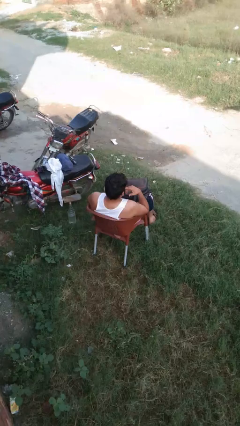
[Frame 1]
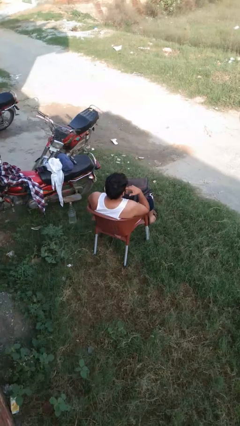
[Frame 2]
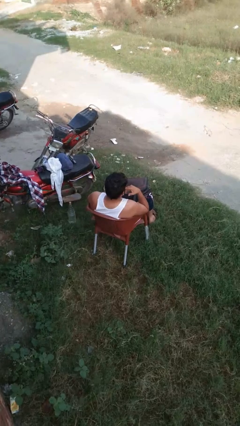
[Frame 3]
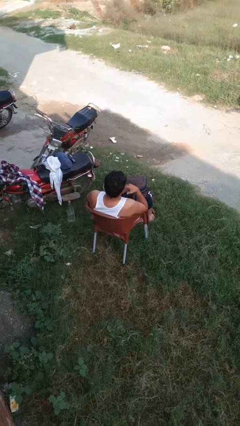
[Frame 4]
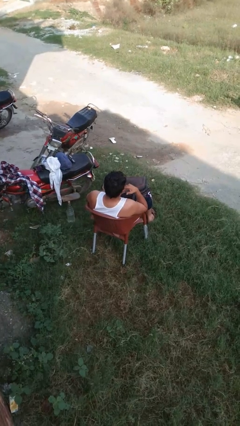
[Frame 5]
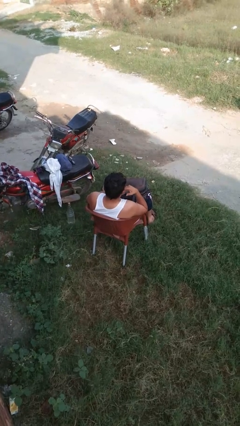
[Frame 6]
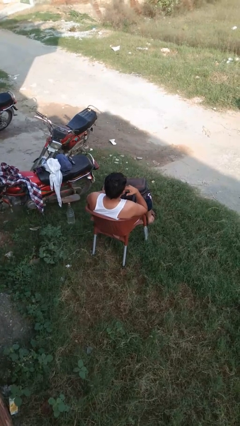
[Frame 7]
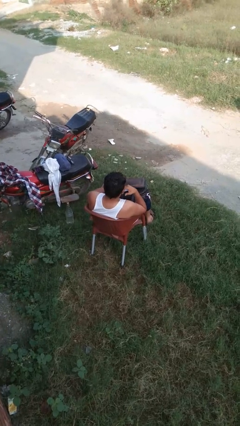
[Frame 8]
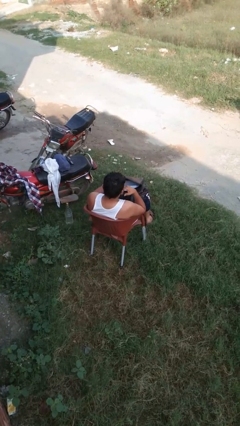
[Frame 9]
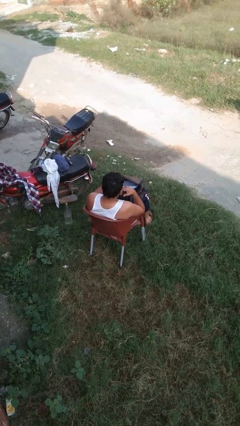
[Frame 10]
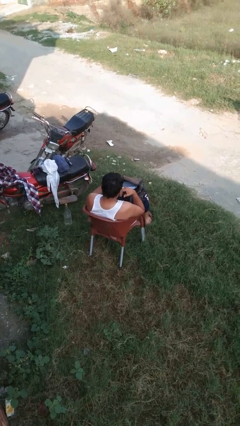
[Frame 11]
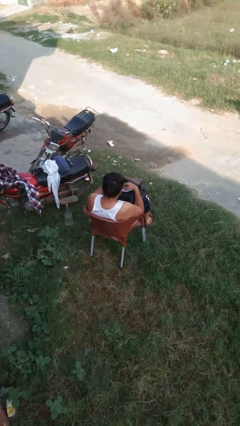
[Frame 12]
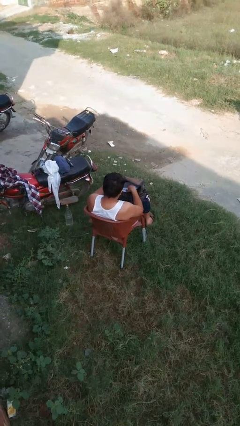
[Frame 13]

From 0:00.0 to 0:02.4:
person searches in backpack

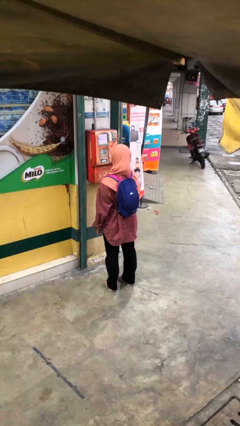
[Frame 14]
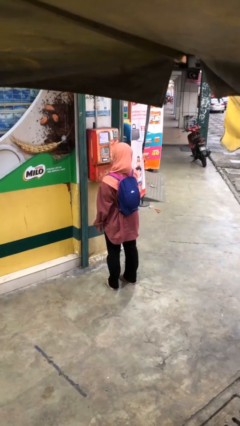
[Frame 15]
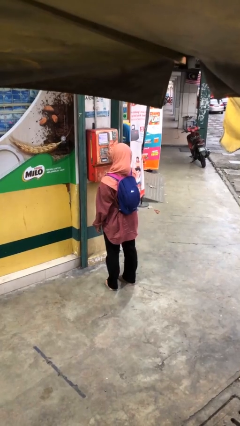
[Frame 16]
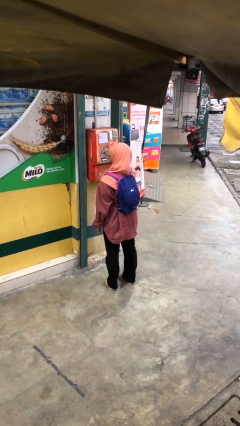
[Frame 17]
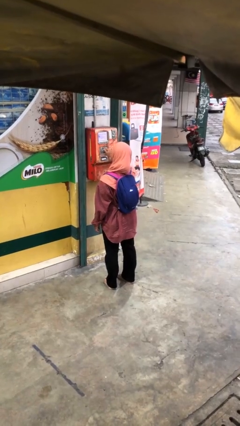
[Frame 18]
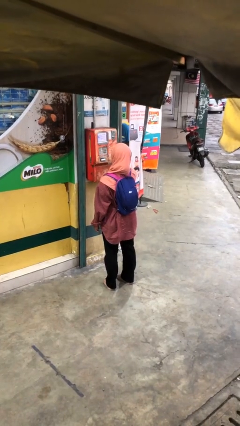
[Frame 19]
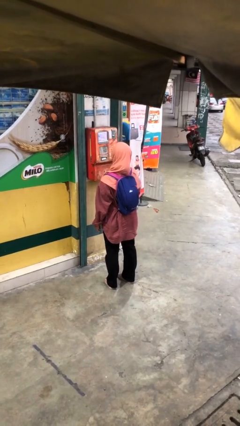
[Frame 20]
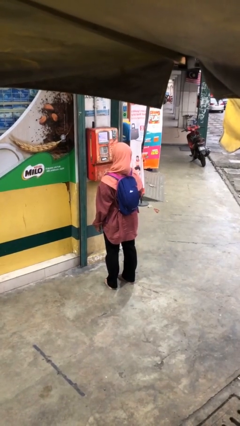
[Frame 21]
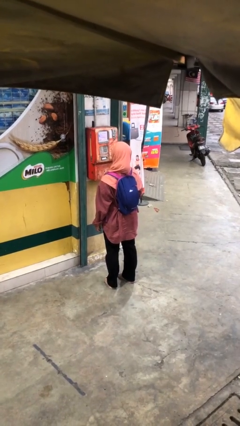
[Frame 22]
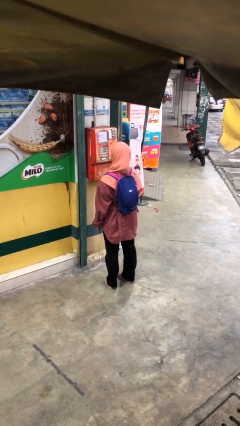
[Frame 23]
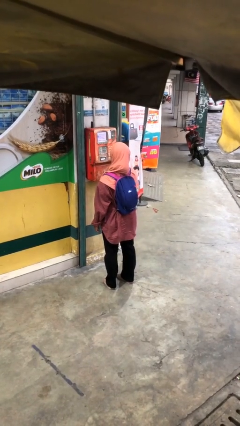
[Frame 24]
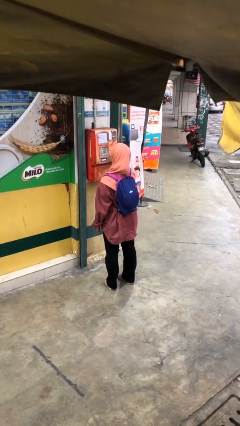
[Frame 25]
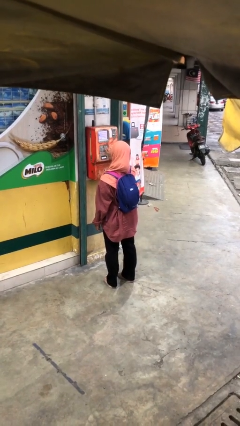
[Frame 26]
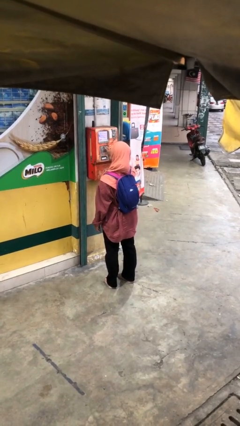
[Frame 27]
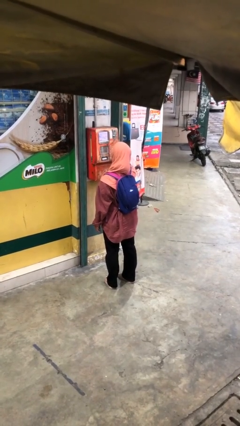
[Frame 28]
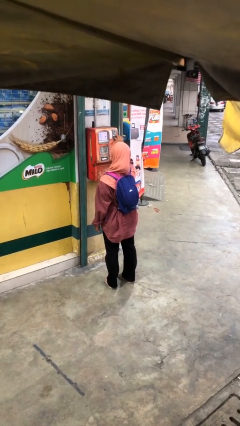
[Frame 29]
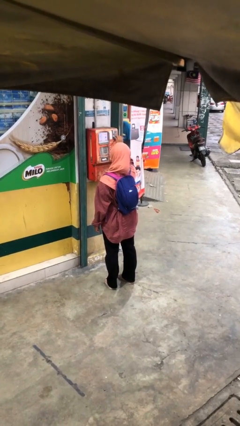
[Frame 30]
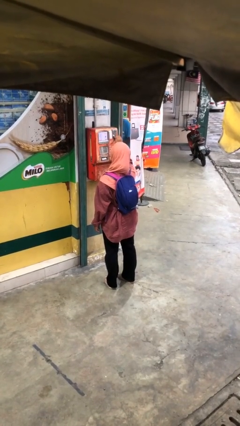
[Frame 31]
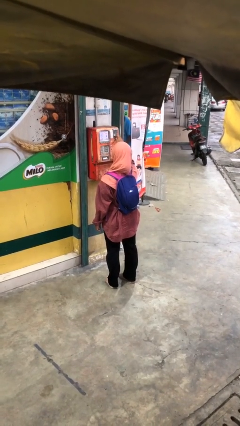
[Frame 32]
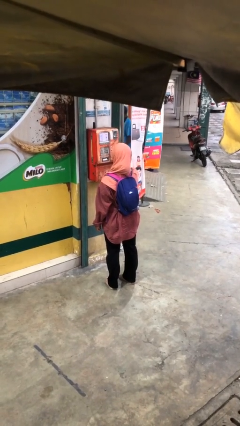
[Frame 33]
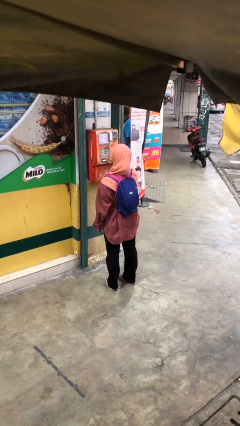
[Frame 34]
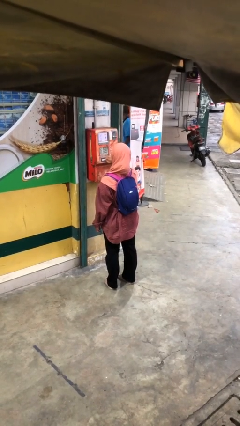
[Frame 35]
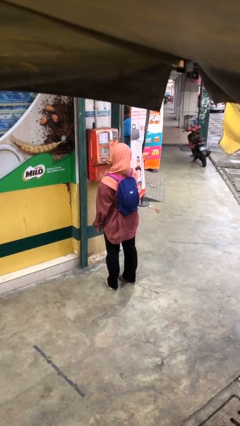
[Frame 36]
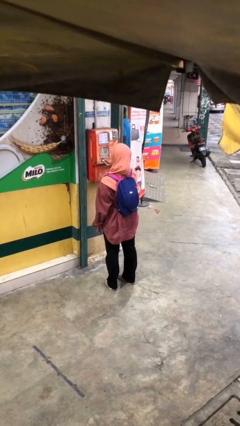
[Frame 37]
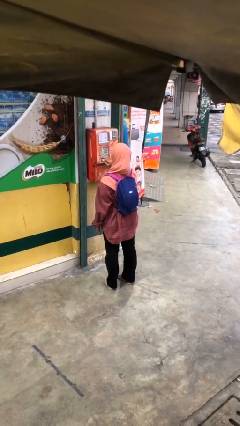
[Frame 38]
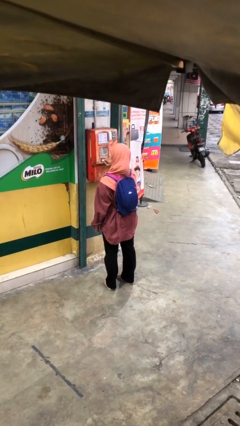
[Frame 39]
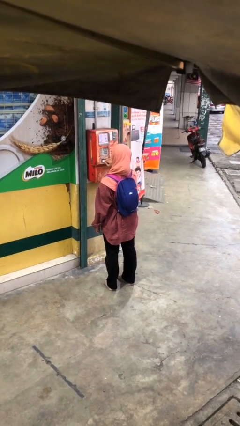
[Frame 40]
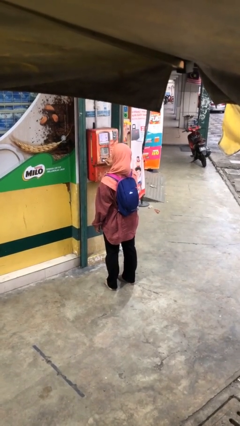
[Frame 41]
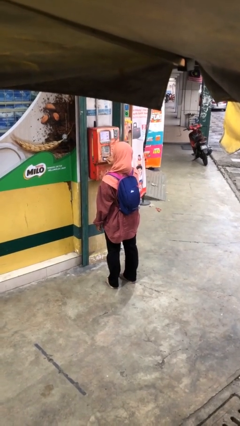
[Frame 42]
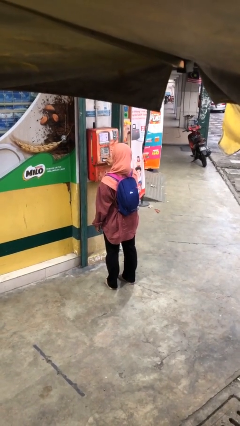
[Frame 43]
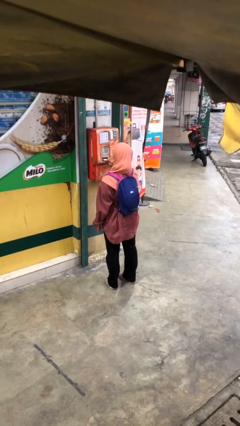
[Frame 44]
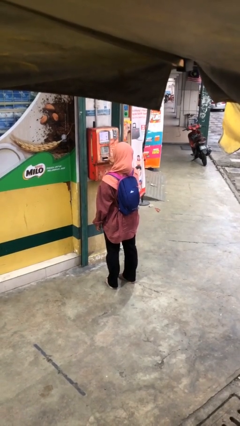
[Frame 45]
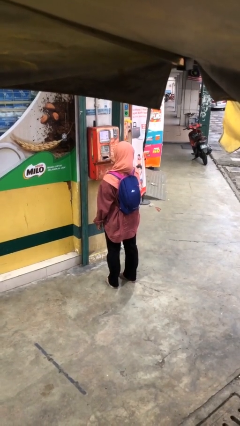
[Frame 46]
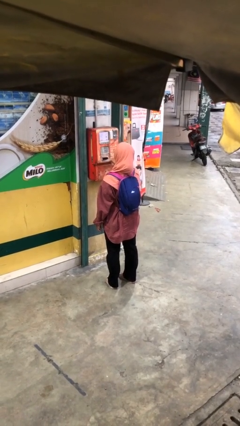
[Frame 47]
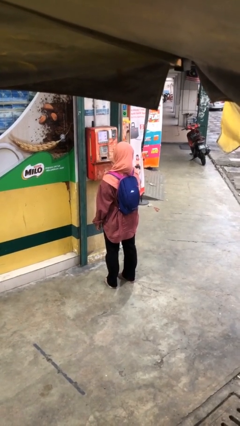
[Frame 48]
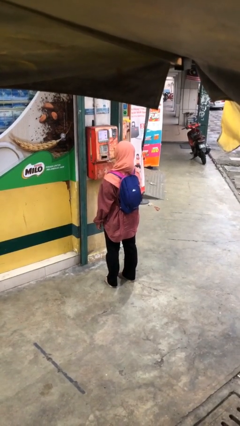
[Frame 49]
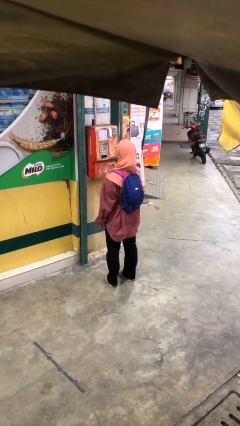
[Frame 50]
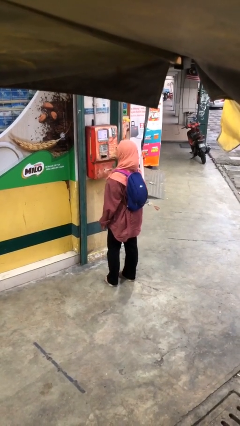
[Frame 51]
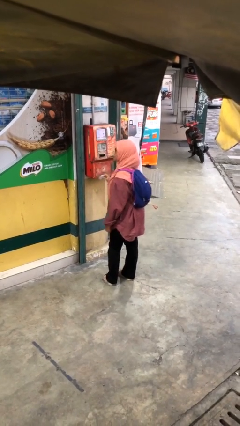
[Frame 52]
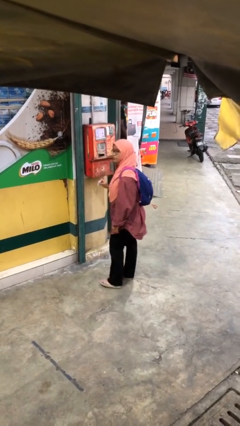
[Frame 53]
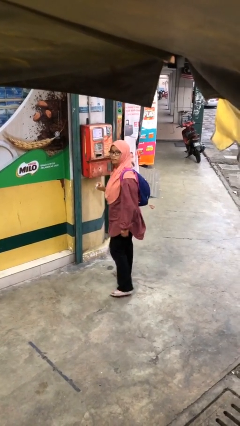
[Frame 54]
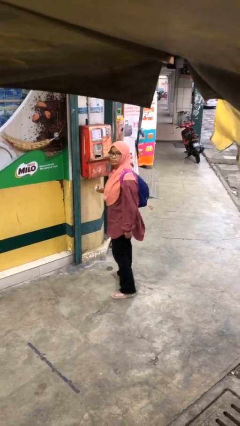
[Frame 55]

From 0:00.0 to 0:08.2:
person purchases from machine

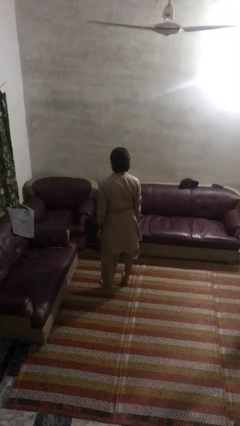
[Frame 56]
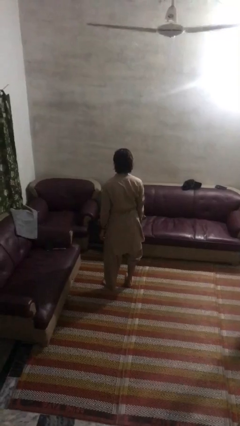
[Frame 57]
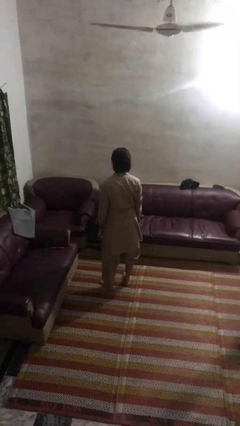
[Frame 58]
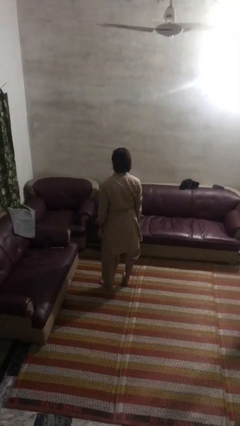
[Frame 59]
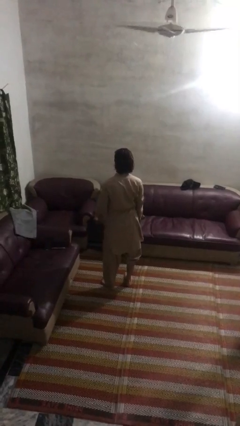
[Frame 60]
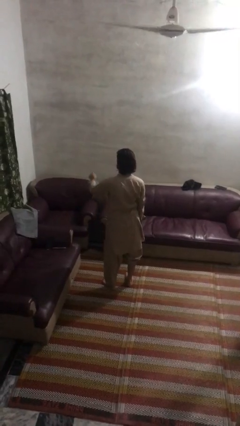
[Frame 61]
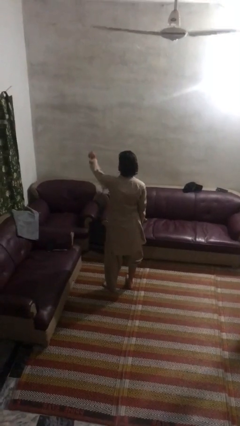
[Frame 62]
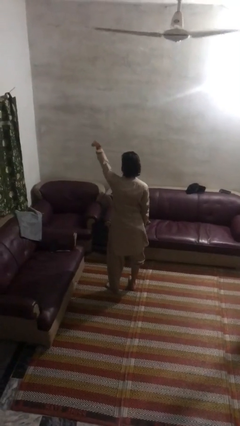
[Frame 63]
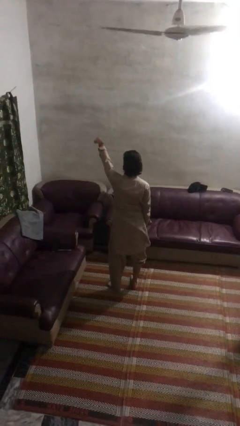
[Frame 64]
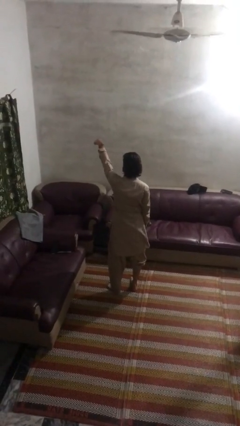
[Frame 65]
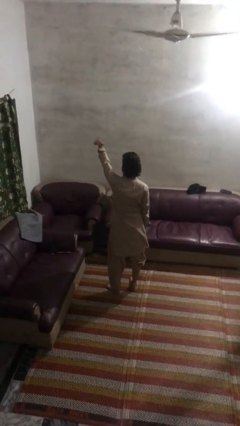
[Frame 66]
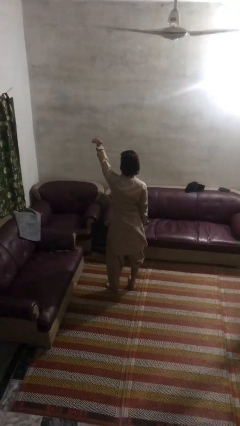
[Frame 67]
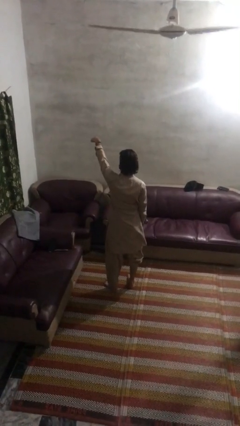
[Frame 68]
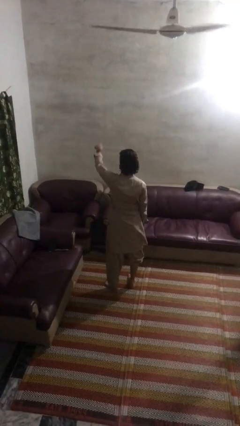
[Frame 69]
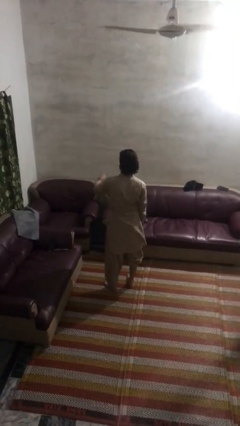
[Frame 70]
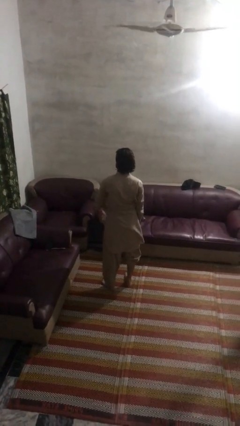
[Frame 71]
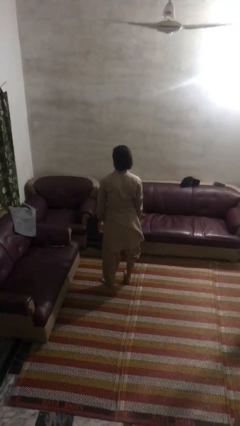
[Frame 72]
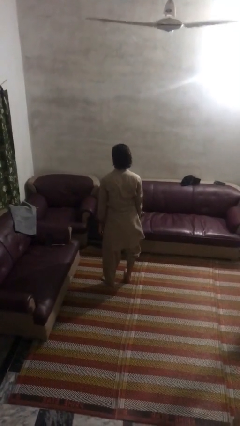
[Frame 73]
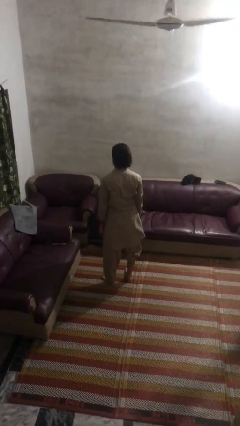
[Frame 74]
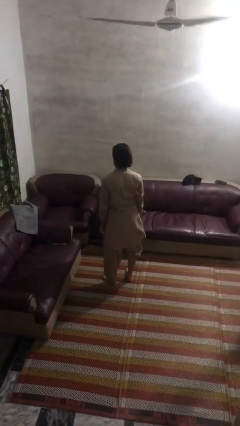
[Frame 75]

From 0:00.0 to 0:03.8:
person points at person

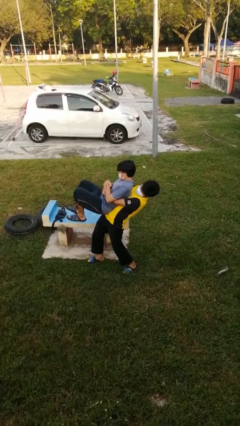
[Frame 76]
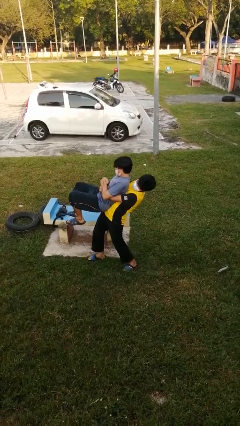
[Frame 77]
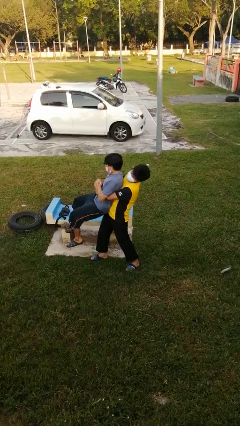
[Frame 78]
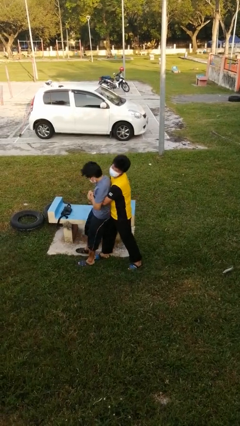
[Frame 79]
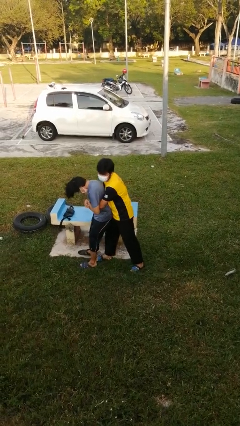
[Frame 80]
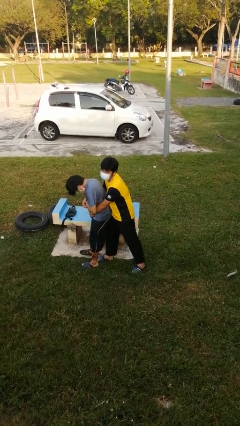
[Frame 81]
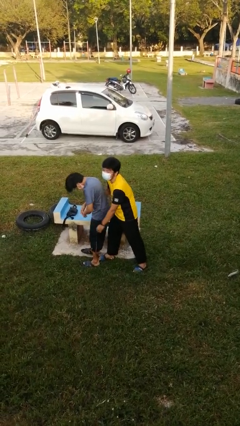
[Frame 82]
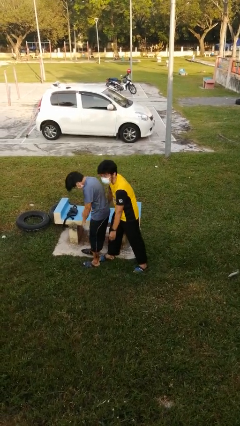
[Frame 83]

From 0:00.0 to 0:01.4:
person puts down person

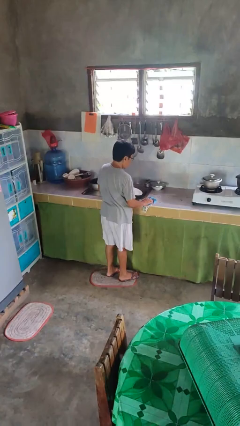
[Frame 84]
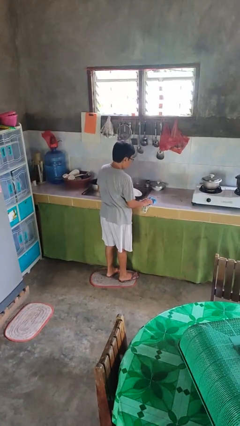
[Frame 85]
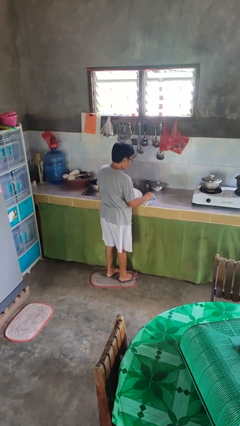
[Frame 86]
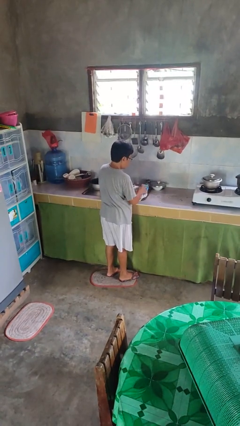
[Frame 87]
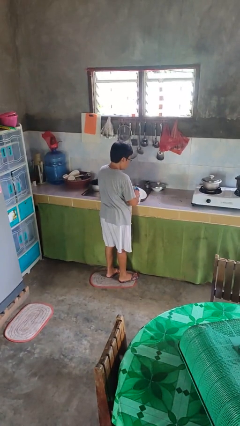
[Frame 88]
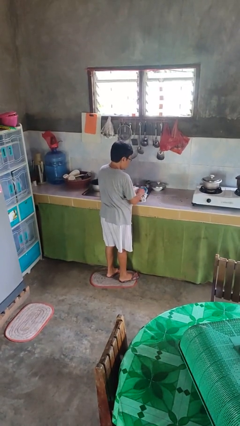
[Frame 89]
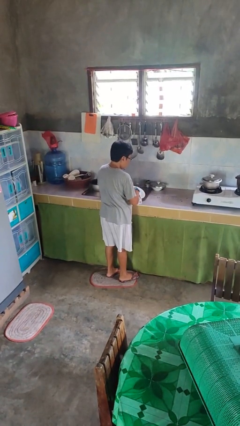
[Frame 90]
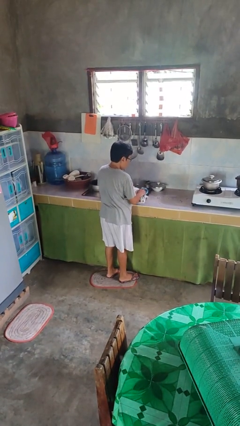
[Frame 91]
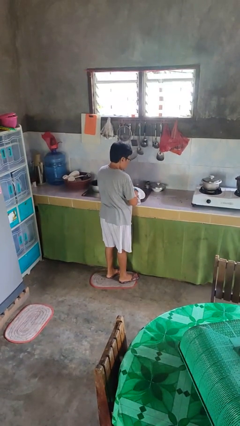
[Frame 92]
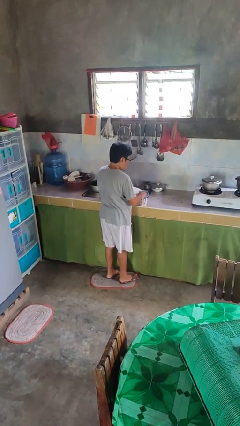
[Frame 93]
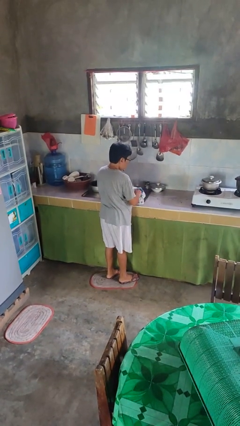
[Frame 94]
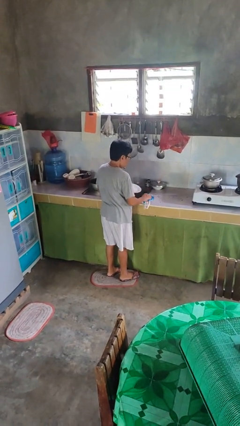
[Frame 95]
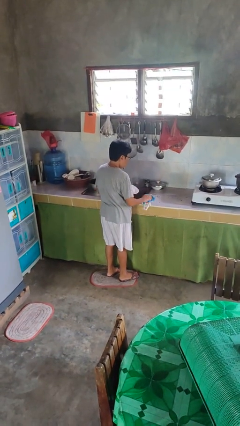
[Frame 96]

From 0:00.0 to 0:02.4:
person dries dish
